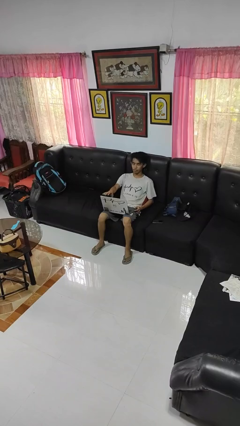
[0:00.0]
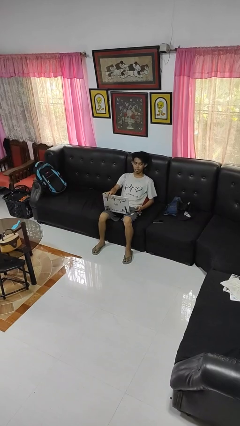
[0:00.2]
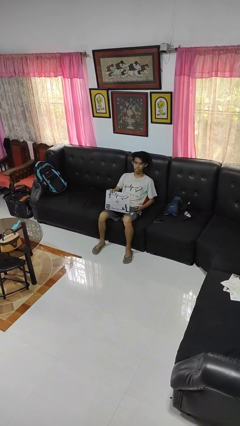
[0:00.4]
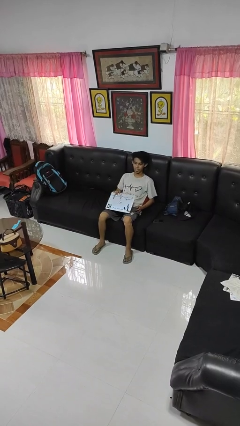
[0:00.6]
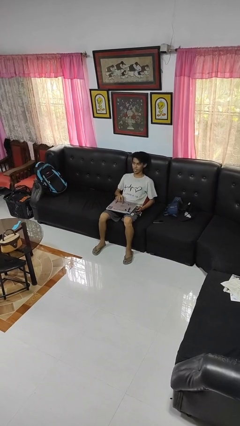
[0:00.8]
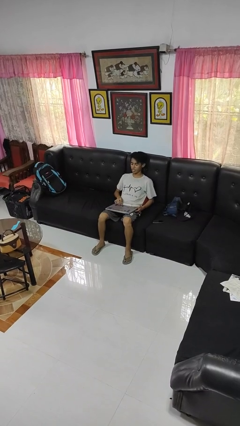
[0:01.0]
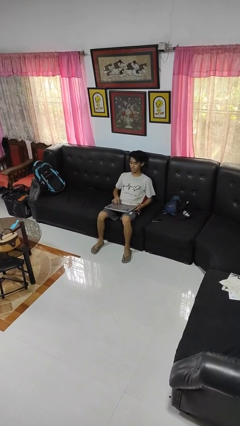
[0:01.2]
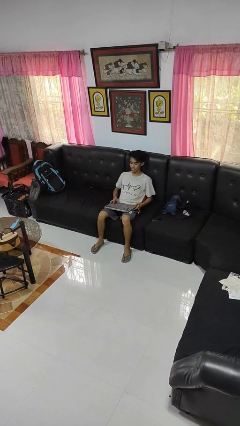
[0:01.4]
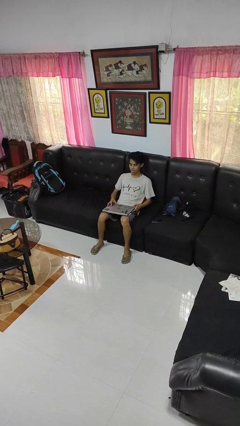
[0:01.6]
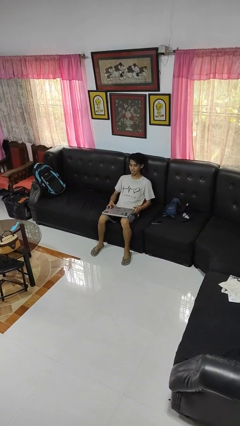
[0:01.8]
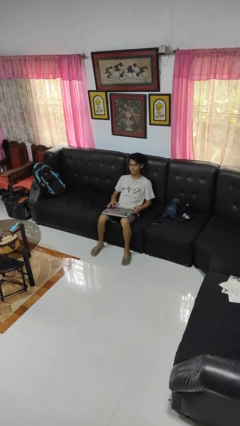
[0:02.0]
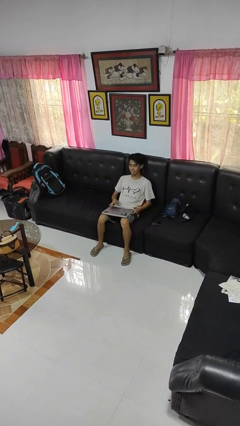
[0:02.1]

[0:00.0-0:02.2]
person closes laptop

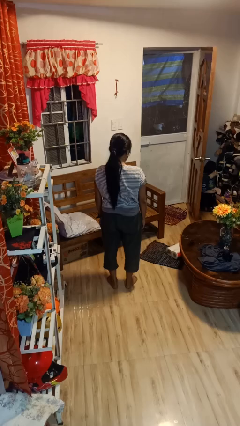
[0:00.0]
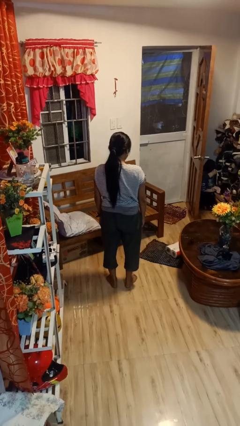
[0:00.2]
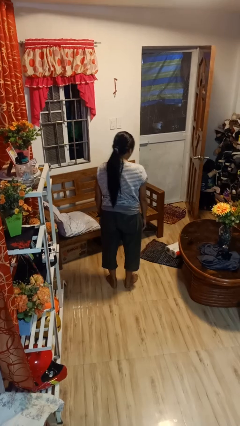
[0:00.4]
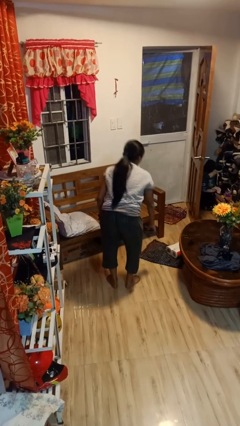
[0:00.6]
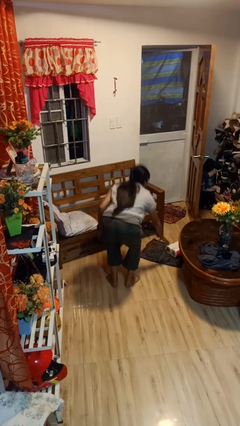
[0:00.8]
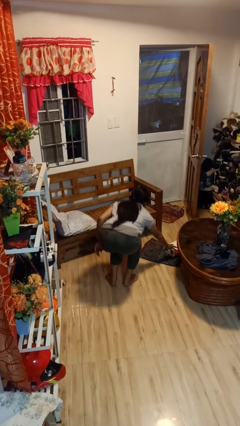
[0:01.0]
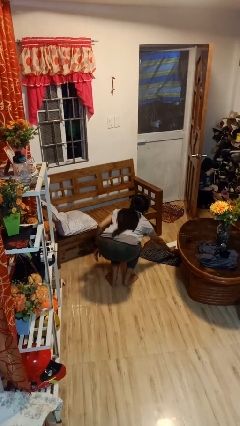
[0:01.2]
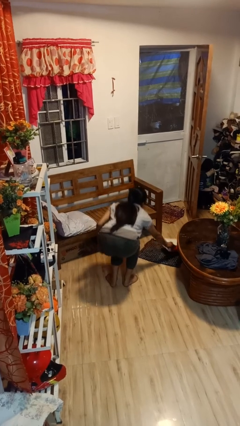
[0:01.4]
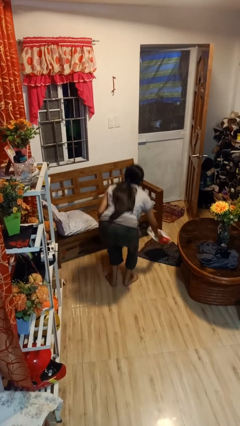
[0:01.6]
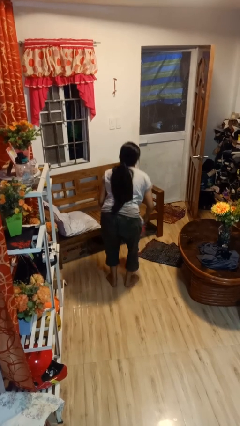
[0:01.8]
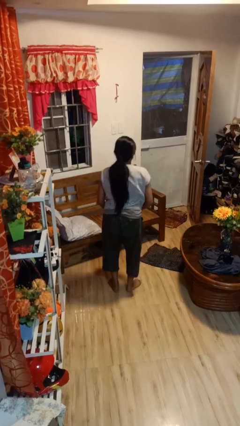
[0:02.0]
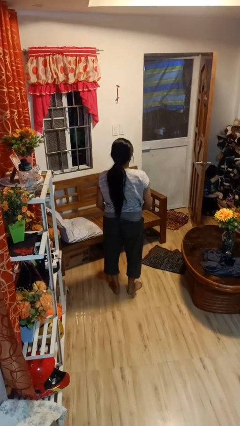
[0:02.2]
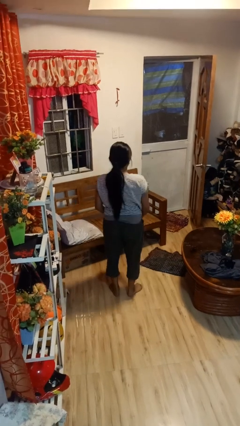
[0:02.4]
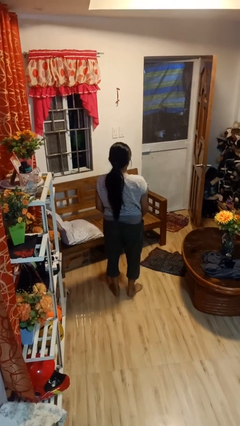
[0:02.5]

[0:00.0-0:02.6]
person picks up object from floor

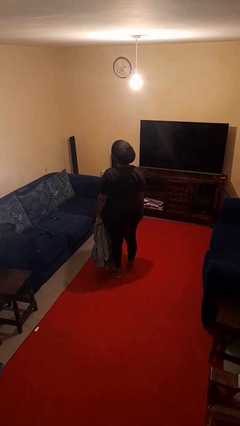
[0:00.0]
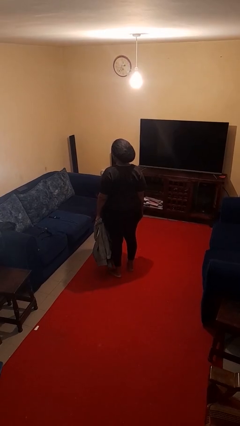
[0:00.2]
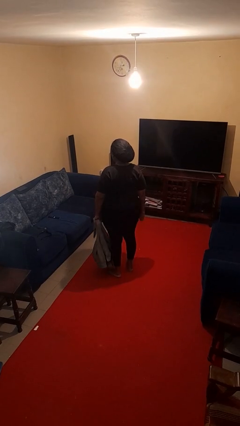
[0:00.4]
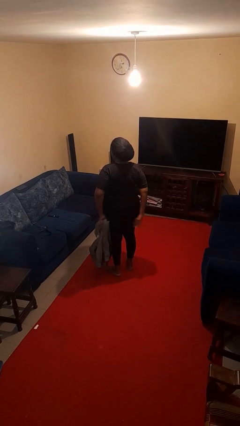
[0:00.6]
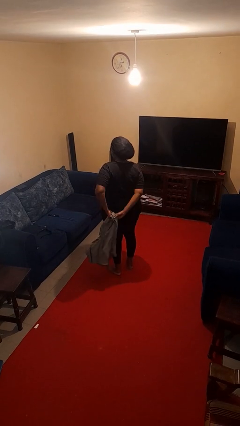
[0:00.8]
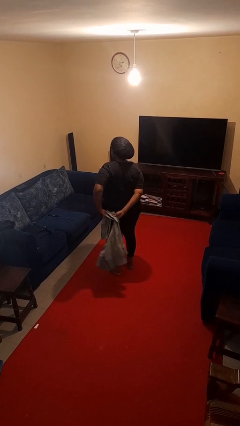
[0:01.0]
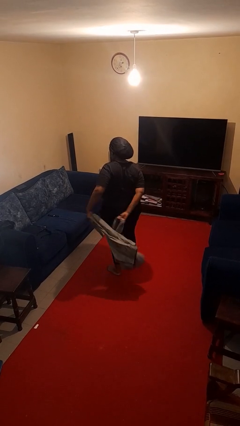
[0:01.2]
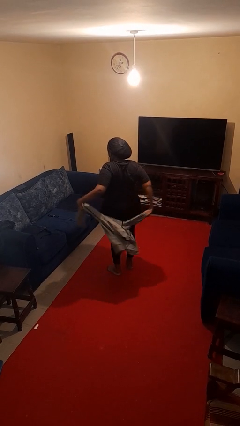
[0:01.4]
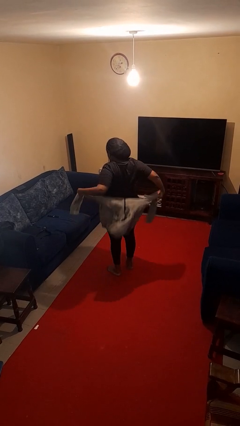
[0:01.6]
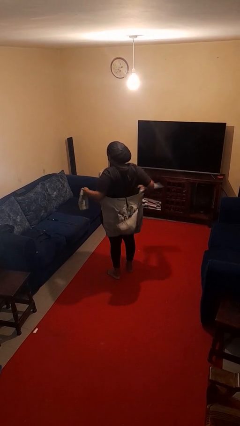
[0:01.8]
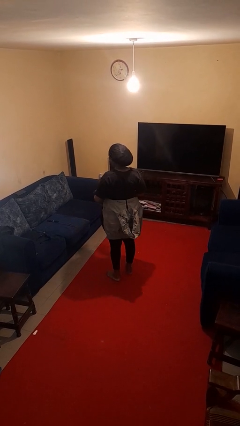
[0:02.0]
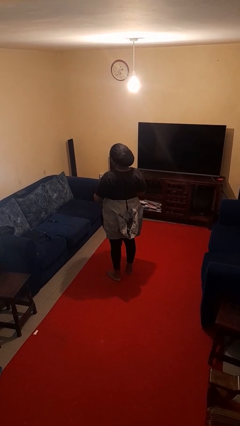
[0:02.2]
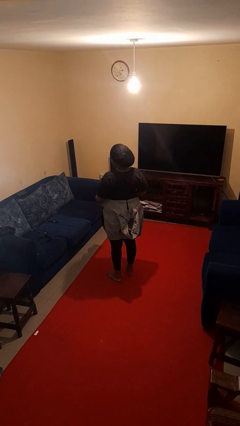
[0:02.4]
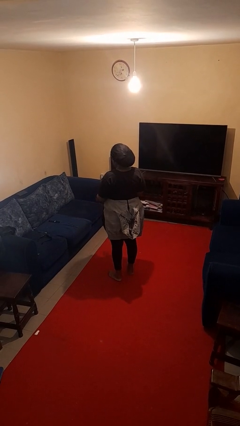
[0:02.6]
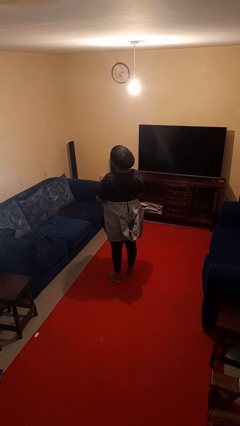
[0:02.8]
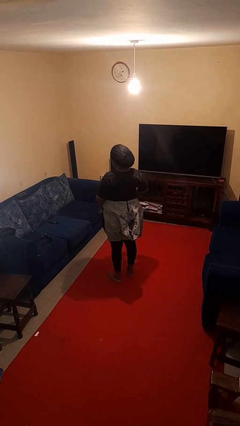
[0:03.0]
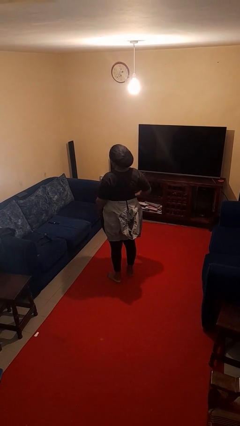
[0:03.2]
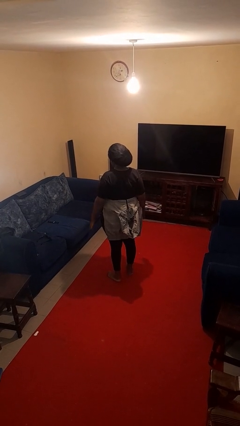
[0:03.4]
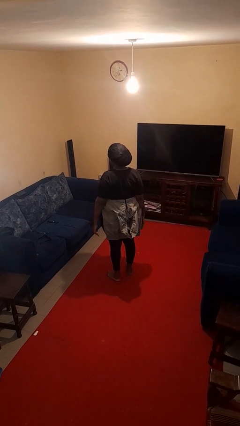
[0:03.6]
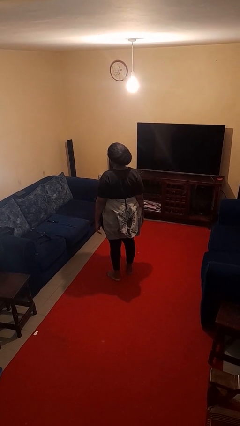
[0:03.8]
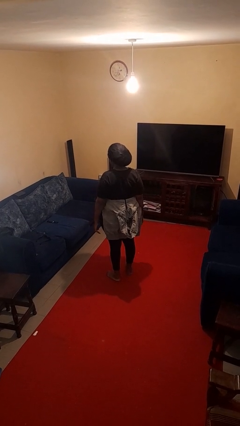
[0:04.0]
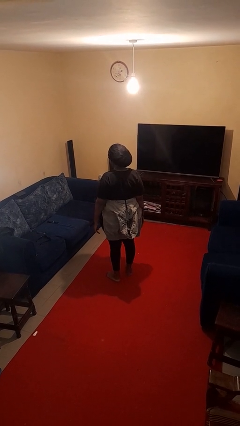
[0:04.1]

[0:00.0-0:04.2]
person ties jacket around waist

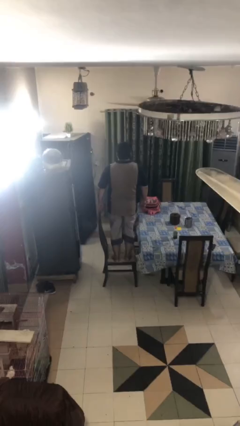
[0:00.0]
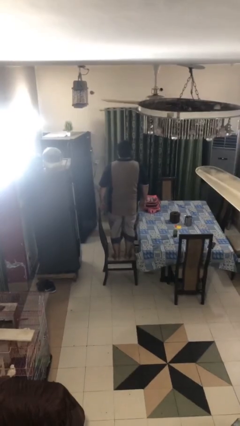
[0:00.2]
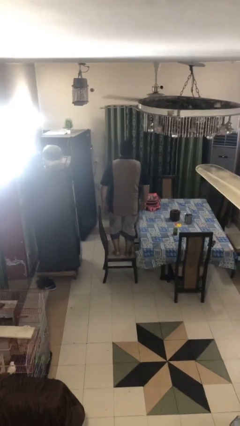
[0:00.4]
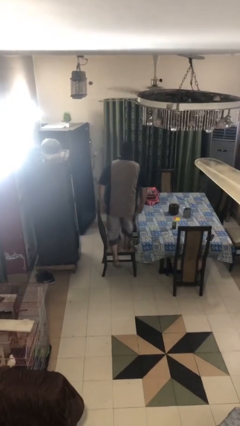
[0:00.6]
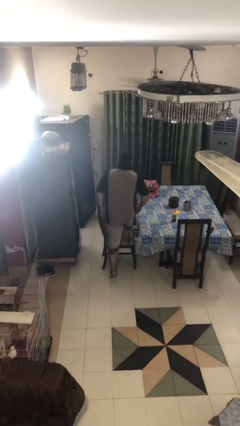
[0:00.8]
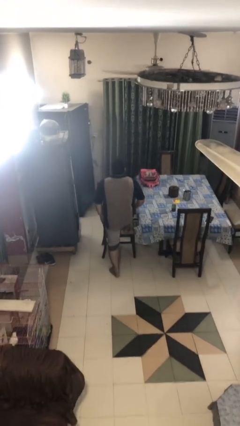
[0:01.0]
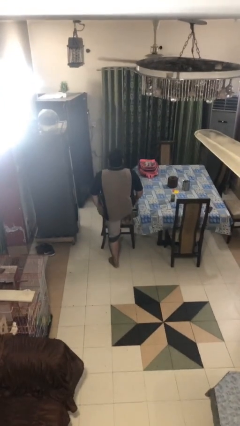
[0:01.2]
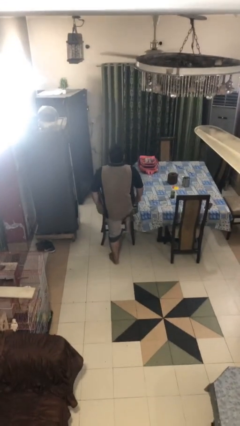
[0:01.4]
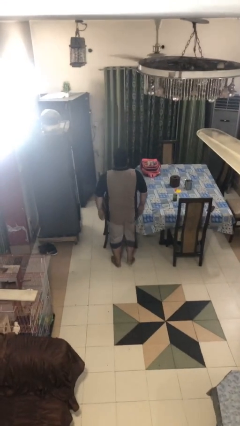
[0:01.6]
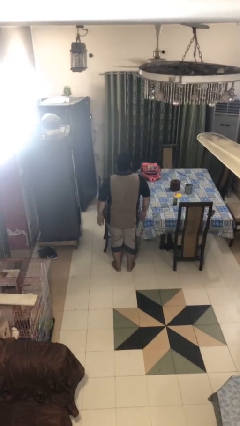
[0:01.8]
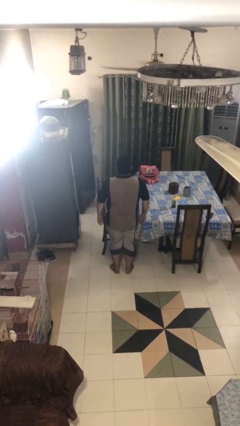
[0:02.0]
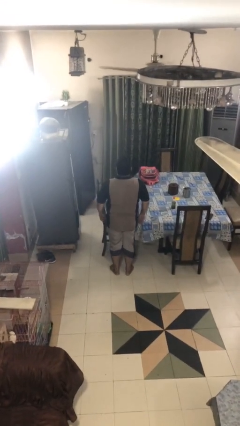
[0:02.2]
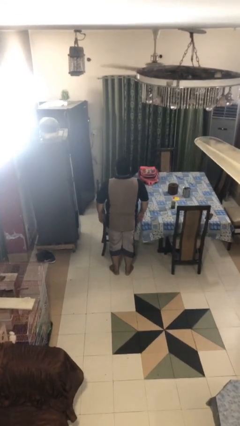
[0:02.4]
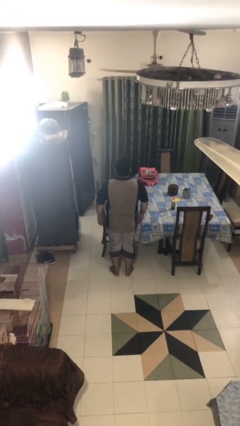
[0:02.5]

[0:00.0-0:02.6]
person climbs off chair

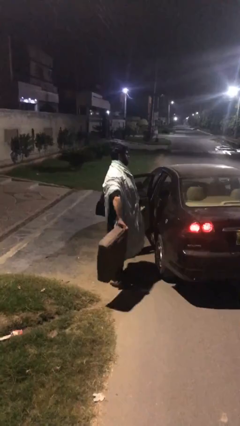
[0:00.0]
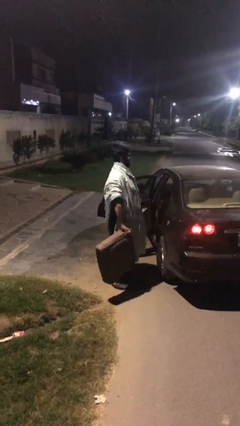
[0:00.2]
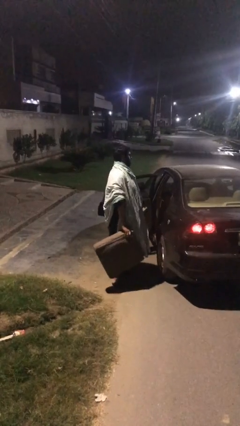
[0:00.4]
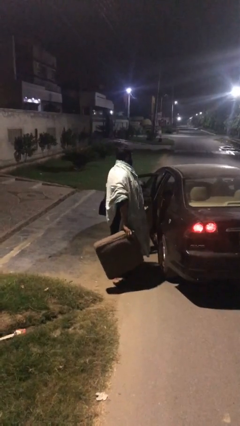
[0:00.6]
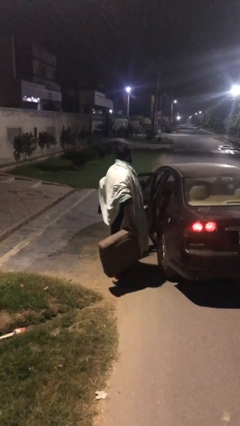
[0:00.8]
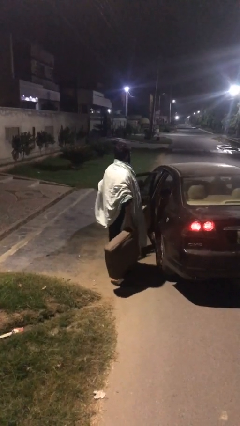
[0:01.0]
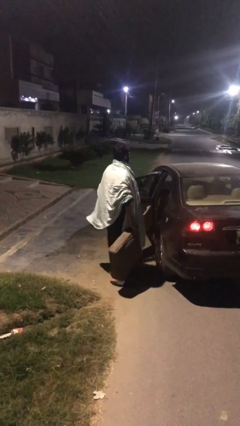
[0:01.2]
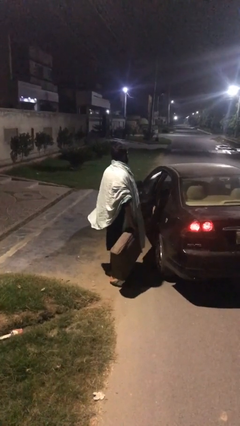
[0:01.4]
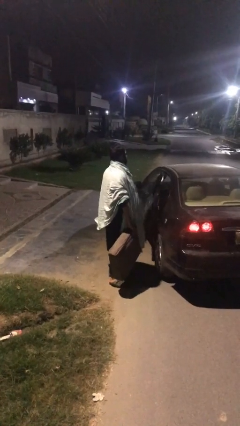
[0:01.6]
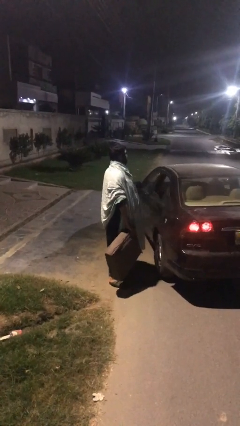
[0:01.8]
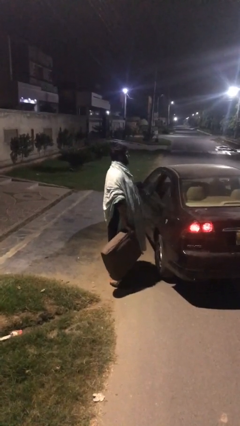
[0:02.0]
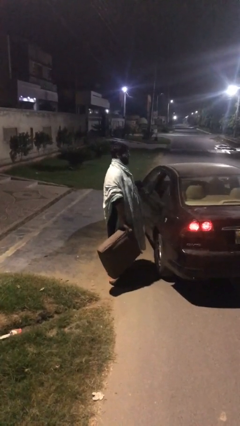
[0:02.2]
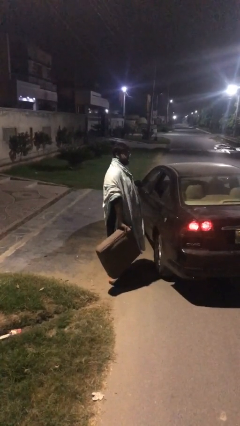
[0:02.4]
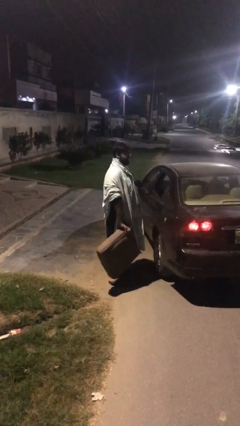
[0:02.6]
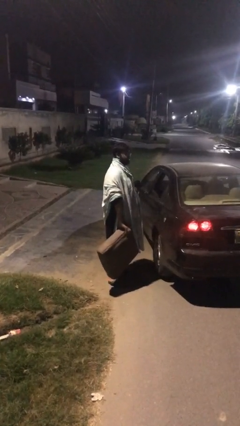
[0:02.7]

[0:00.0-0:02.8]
person closes car door

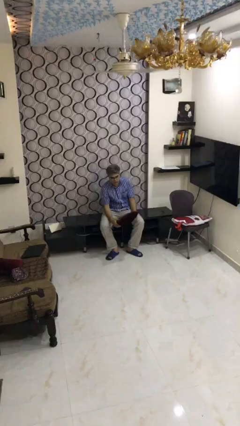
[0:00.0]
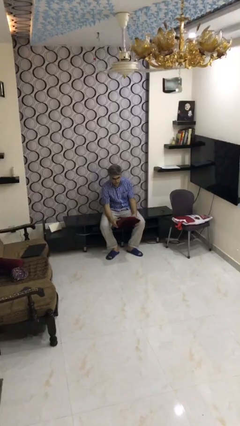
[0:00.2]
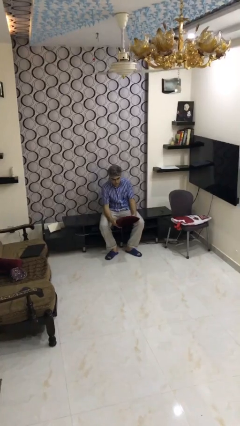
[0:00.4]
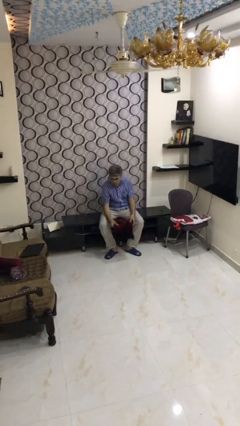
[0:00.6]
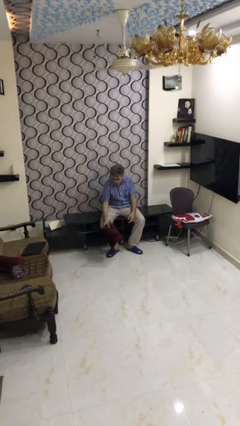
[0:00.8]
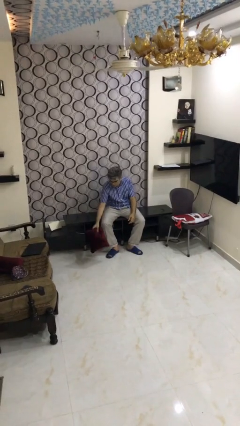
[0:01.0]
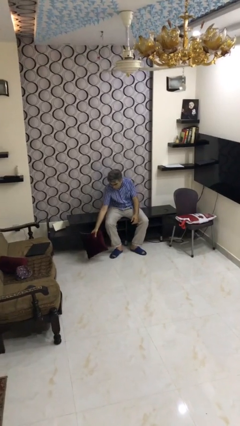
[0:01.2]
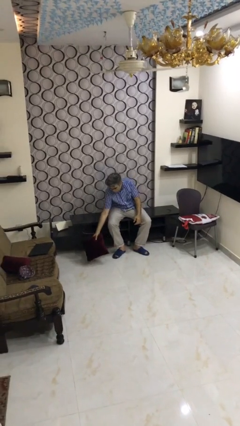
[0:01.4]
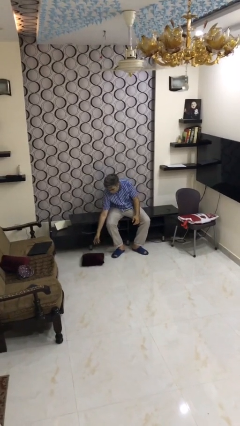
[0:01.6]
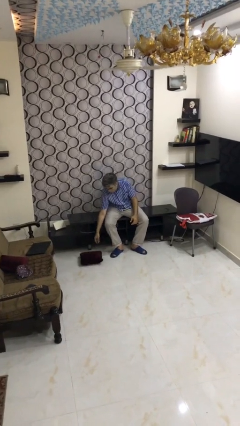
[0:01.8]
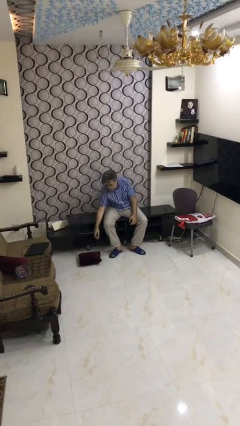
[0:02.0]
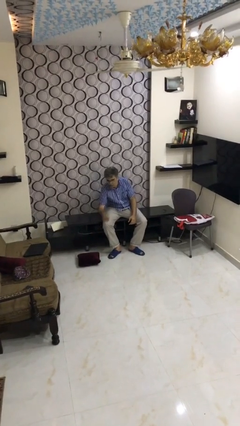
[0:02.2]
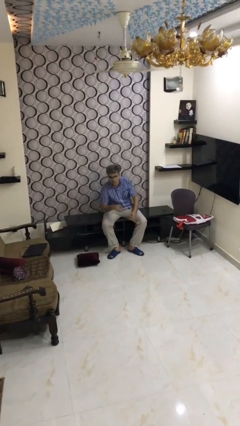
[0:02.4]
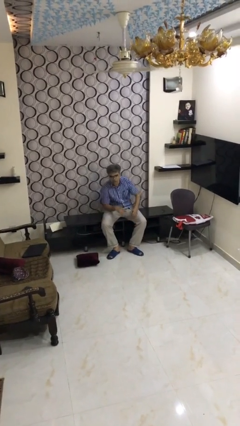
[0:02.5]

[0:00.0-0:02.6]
person puts down object on floor

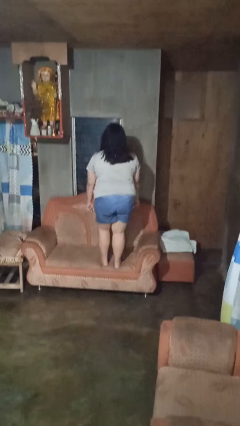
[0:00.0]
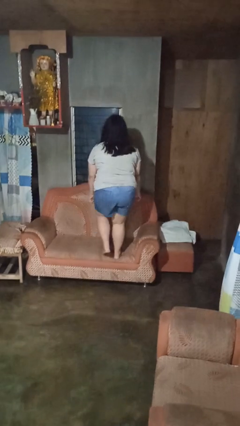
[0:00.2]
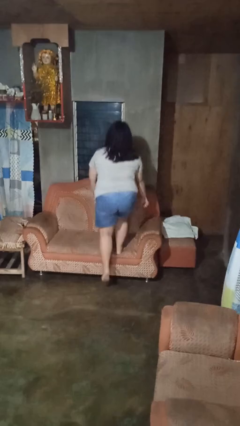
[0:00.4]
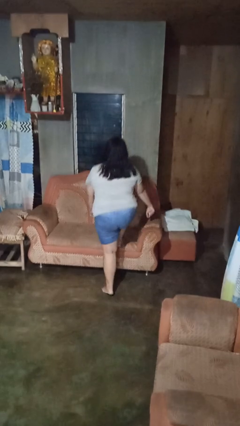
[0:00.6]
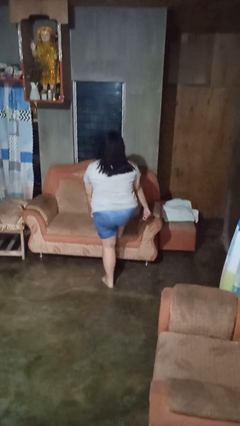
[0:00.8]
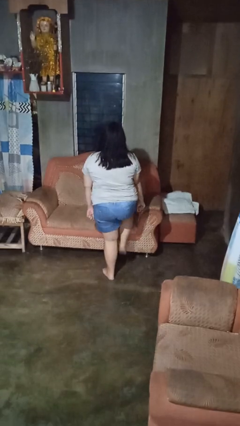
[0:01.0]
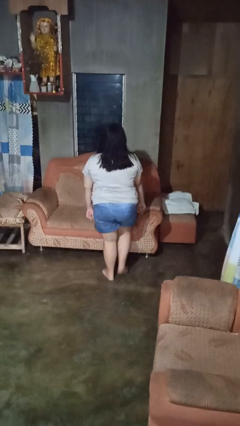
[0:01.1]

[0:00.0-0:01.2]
person climbs off couch
